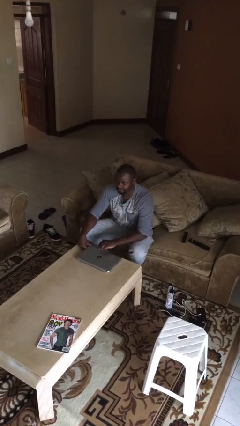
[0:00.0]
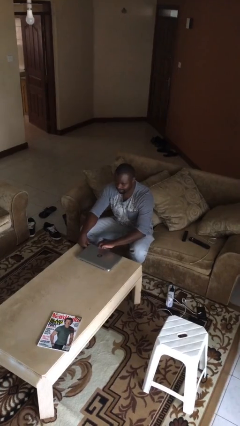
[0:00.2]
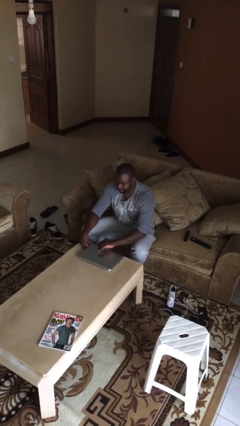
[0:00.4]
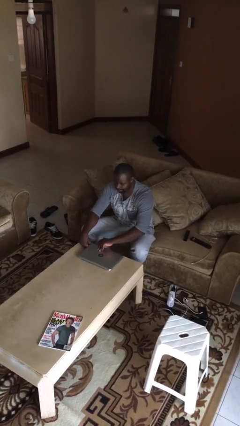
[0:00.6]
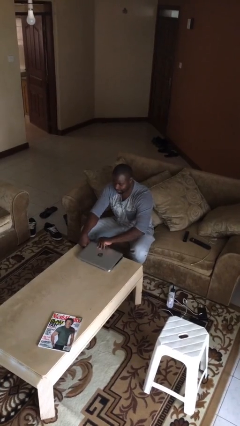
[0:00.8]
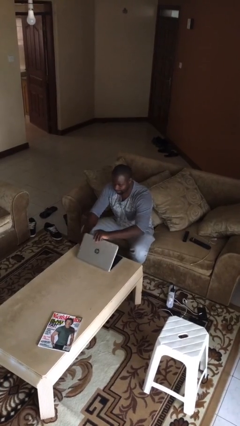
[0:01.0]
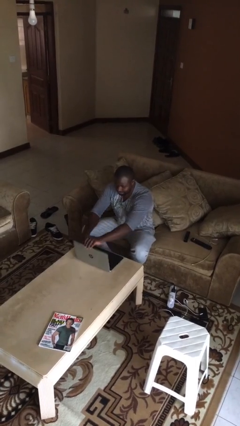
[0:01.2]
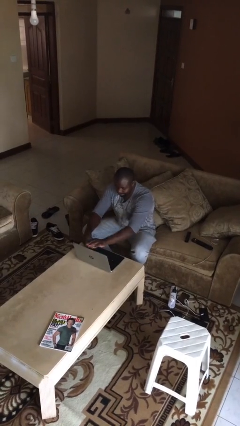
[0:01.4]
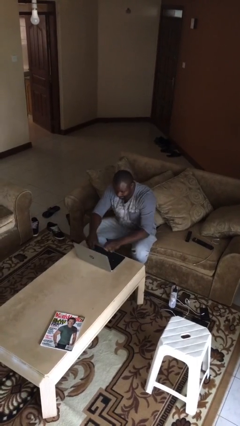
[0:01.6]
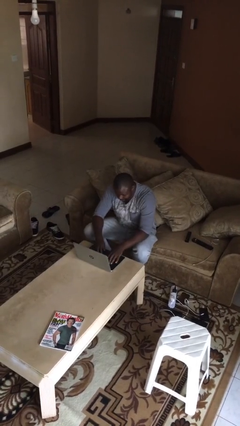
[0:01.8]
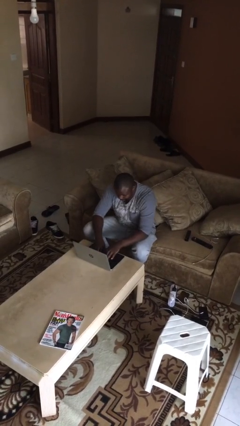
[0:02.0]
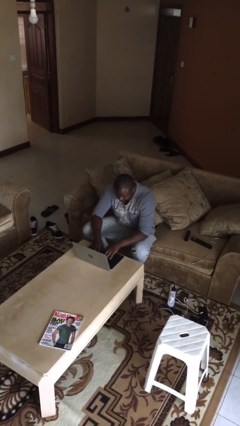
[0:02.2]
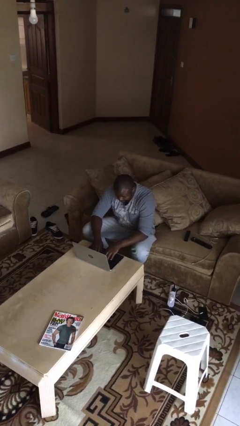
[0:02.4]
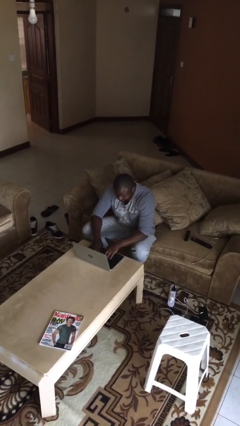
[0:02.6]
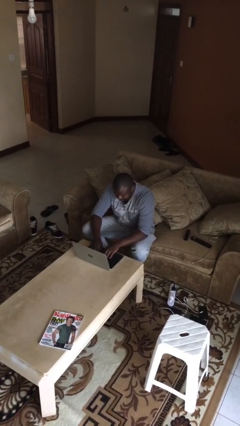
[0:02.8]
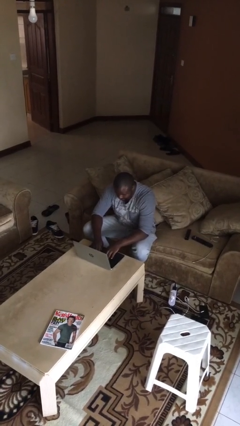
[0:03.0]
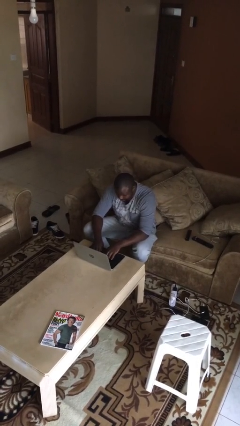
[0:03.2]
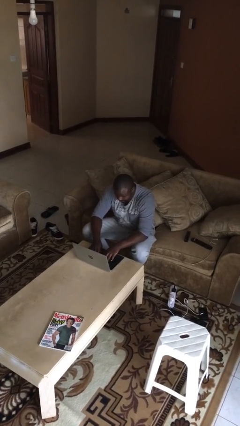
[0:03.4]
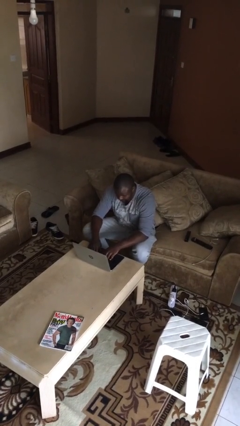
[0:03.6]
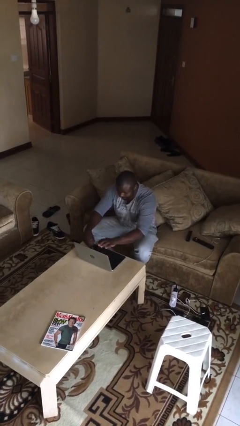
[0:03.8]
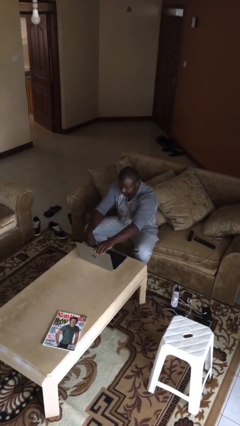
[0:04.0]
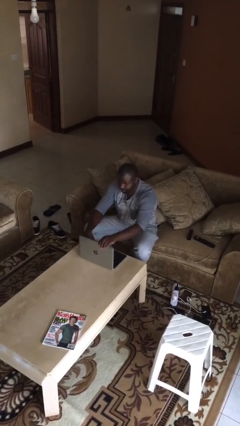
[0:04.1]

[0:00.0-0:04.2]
person interacts with laptop

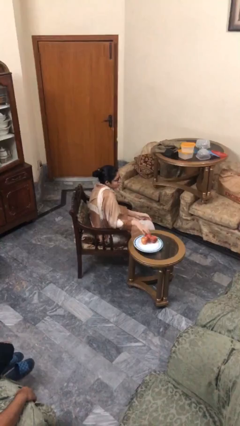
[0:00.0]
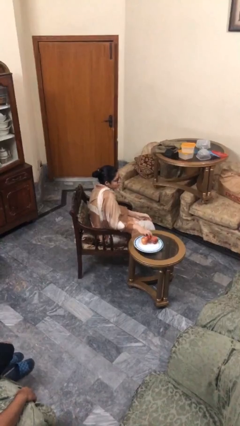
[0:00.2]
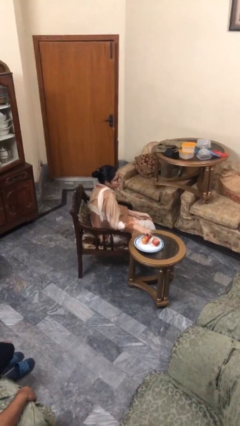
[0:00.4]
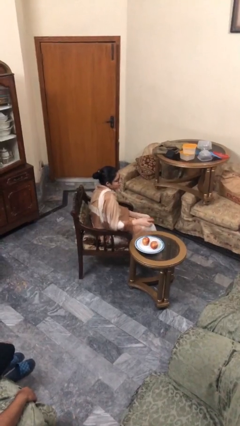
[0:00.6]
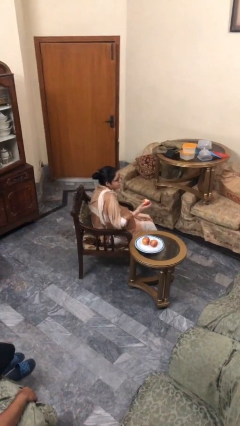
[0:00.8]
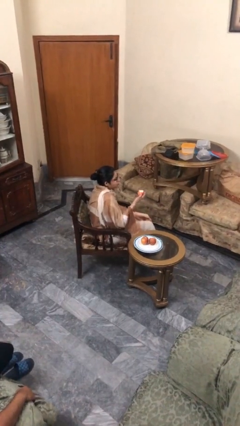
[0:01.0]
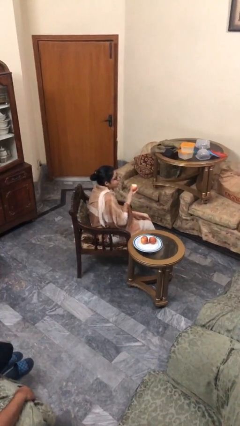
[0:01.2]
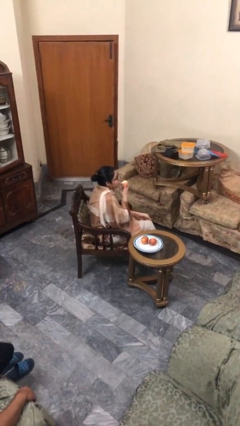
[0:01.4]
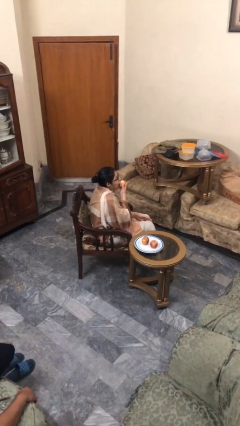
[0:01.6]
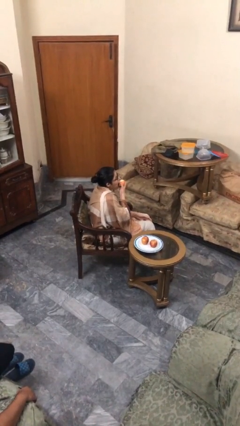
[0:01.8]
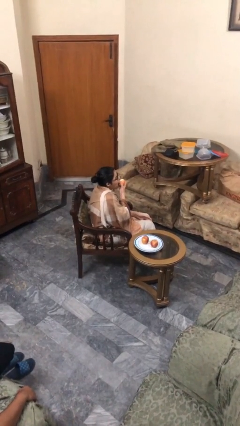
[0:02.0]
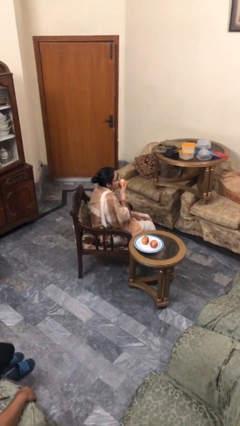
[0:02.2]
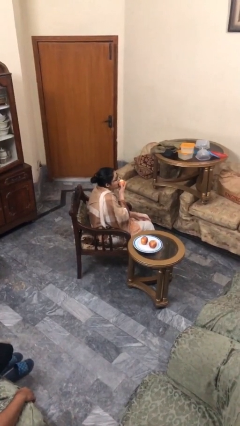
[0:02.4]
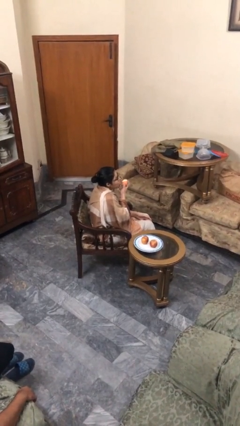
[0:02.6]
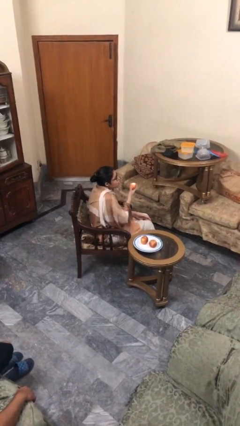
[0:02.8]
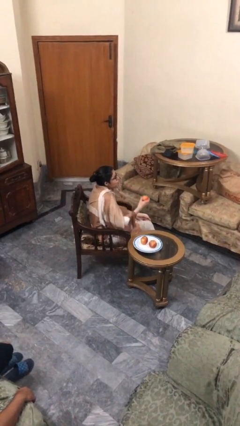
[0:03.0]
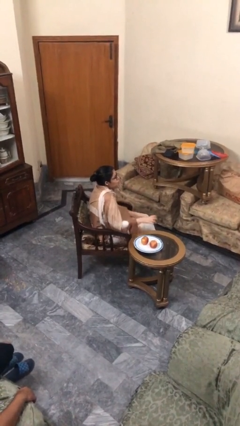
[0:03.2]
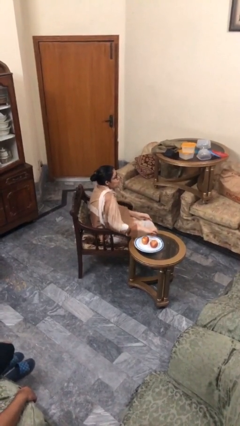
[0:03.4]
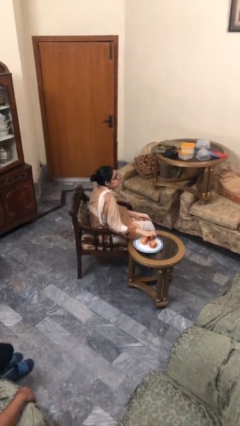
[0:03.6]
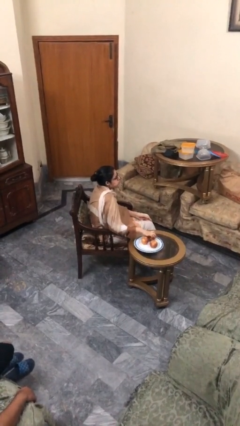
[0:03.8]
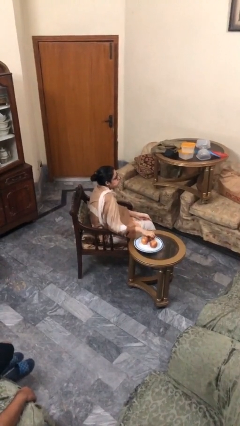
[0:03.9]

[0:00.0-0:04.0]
person eats apple

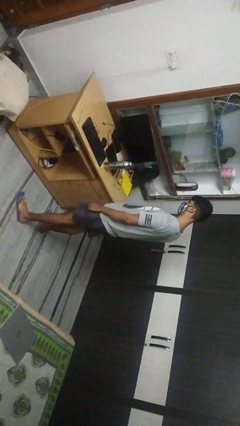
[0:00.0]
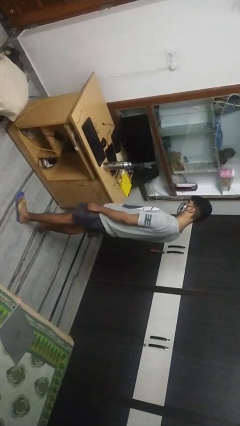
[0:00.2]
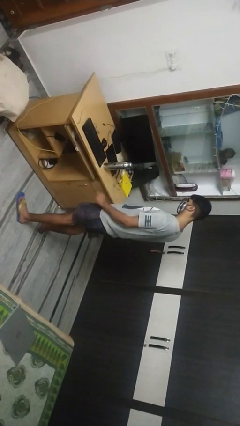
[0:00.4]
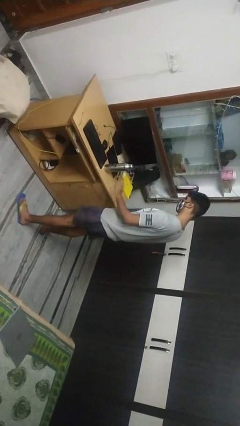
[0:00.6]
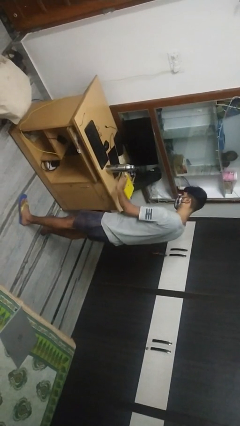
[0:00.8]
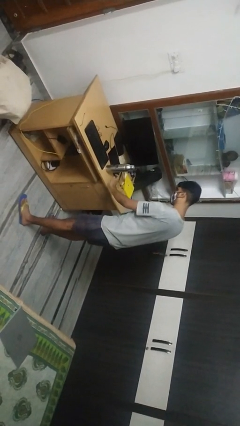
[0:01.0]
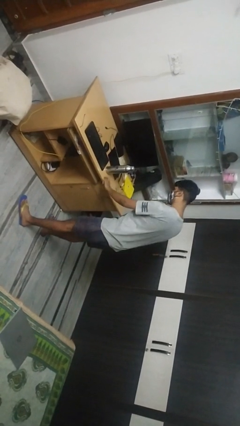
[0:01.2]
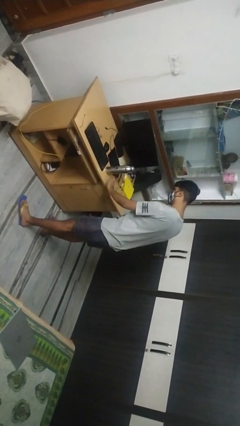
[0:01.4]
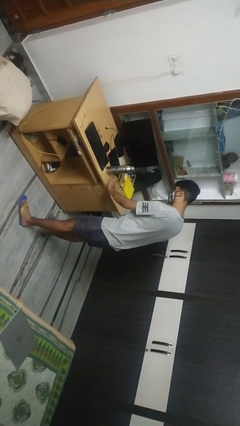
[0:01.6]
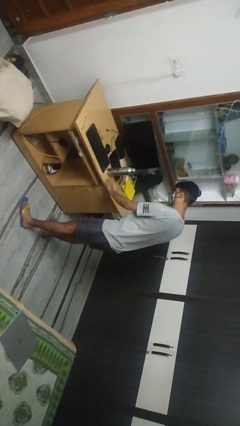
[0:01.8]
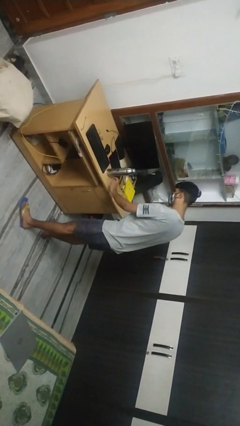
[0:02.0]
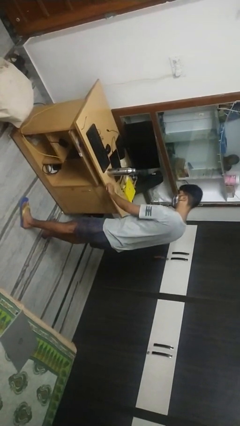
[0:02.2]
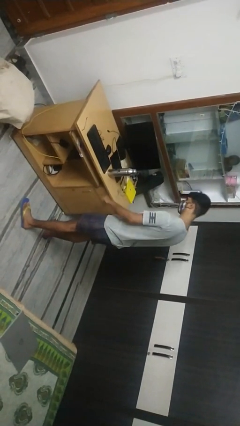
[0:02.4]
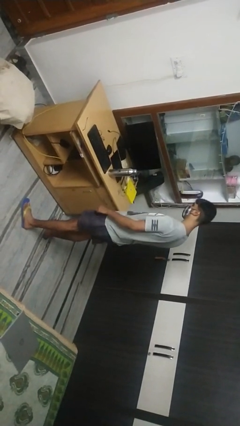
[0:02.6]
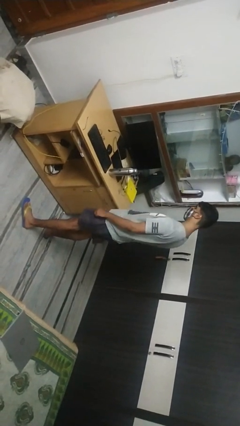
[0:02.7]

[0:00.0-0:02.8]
person taps object with finger

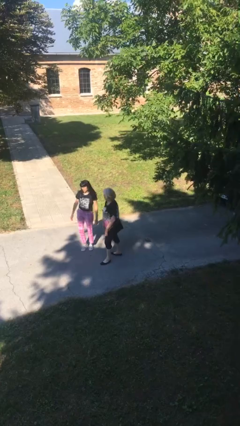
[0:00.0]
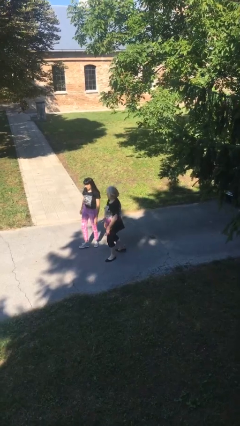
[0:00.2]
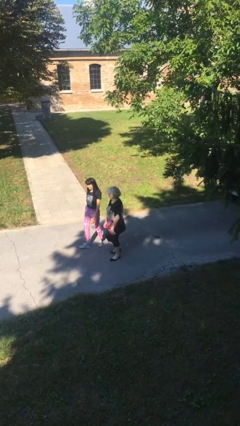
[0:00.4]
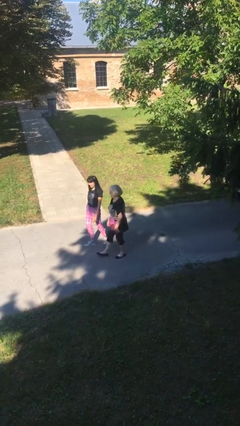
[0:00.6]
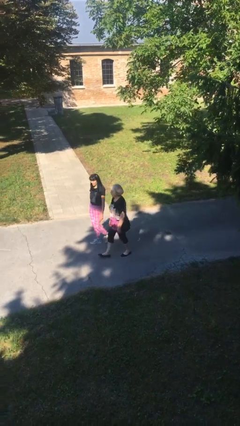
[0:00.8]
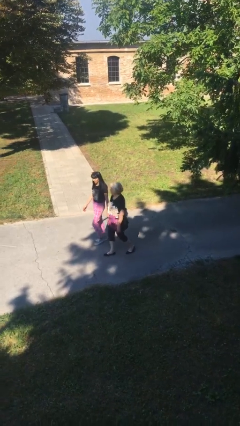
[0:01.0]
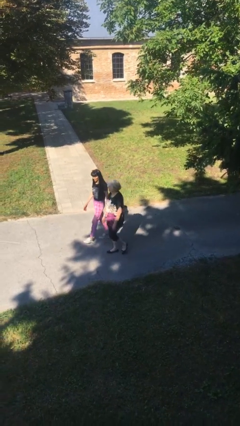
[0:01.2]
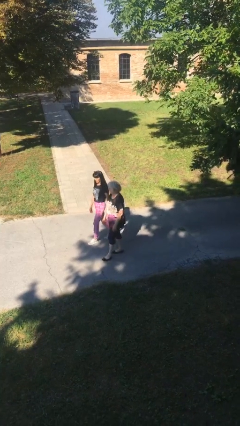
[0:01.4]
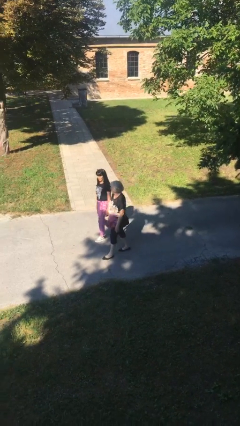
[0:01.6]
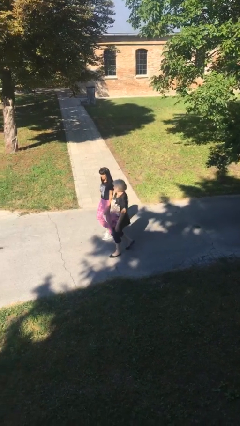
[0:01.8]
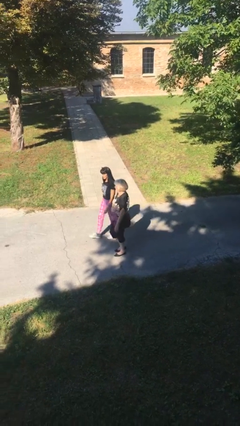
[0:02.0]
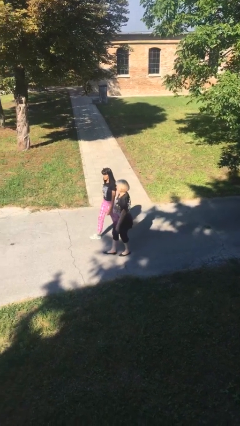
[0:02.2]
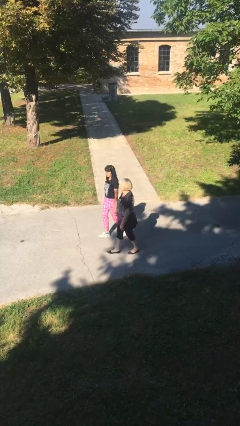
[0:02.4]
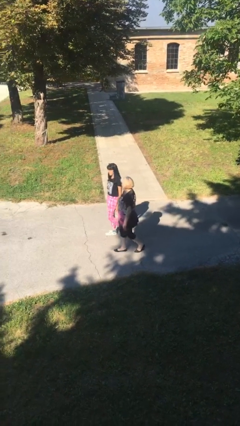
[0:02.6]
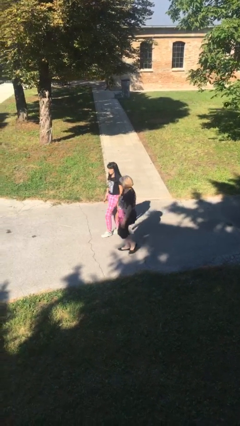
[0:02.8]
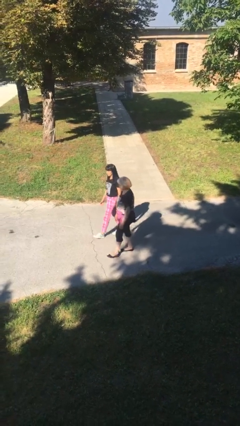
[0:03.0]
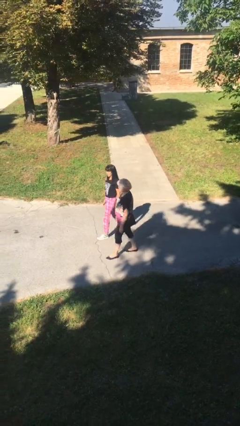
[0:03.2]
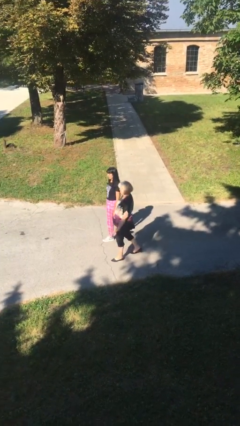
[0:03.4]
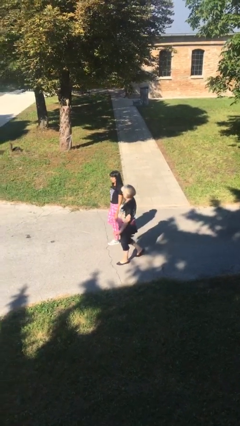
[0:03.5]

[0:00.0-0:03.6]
person talks to person

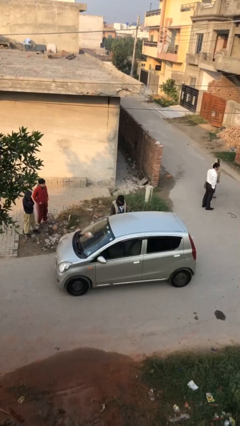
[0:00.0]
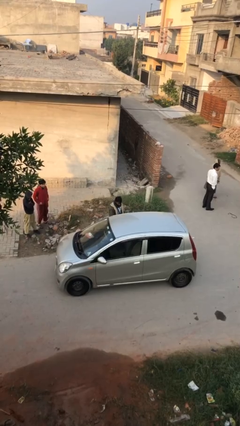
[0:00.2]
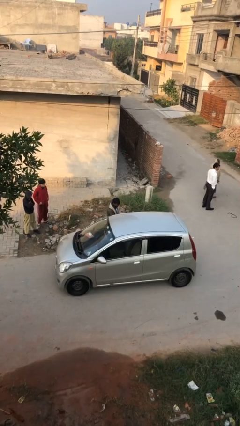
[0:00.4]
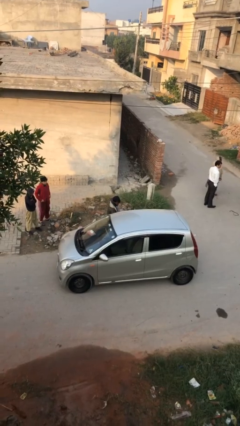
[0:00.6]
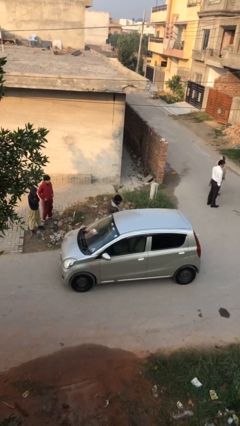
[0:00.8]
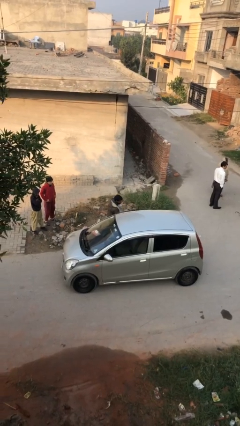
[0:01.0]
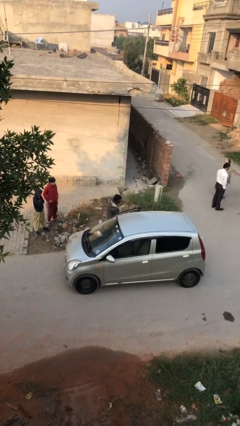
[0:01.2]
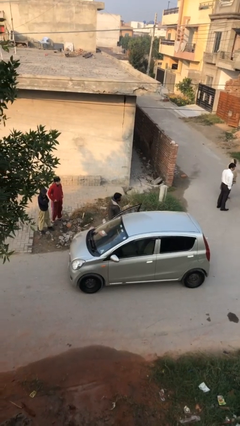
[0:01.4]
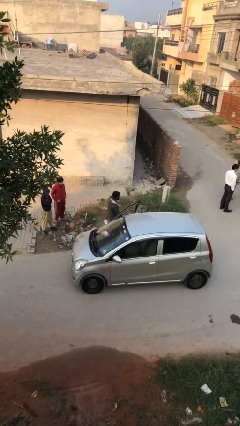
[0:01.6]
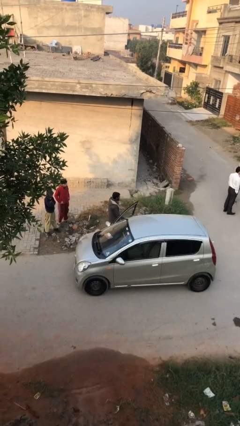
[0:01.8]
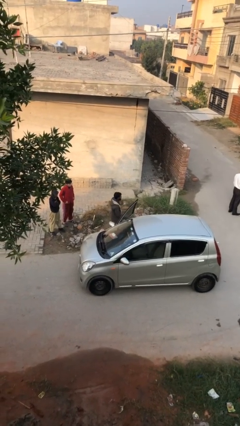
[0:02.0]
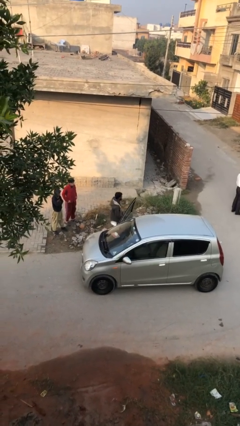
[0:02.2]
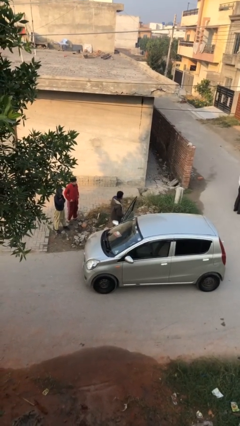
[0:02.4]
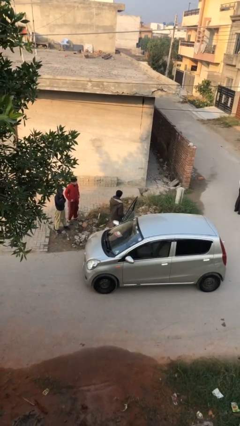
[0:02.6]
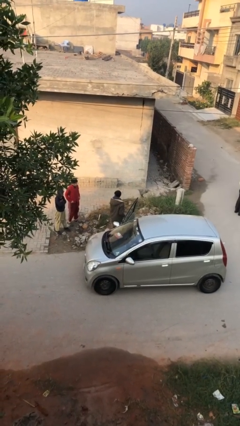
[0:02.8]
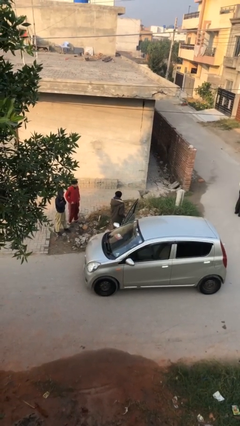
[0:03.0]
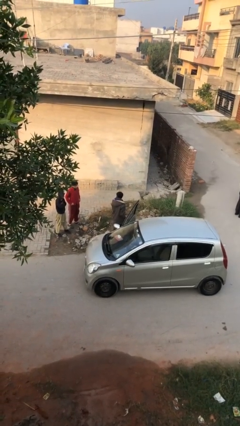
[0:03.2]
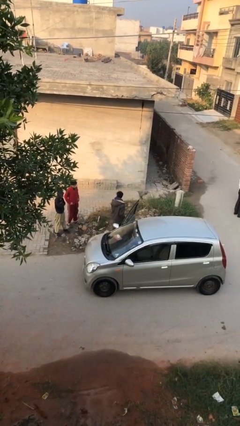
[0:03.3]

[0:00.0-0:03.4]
person opens car door
